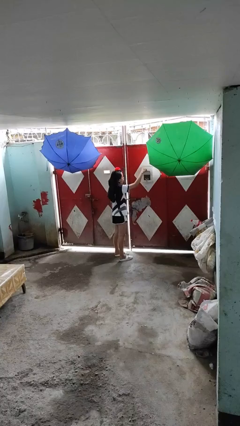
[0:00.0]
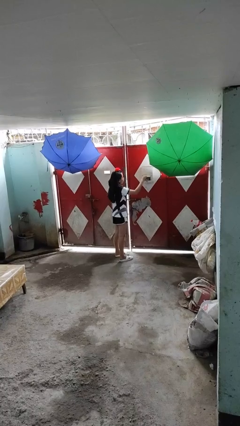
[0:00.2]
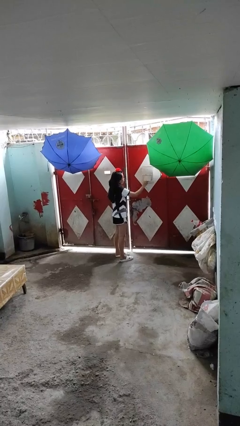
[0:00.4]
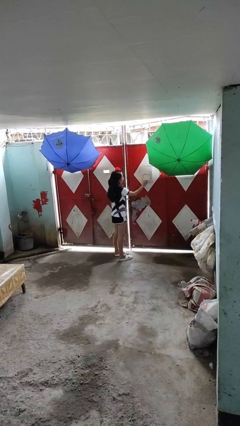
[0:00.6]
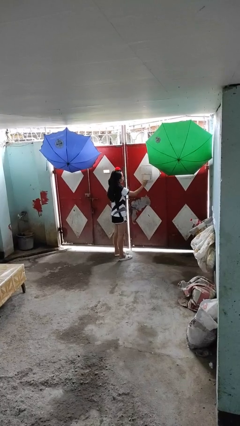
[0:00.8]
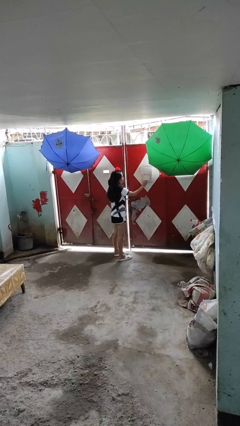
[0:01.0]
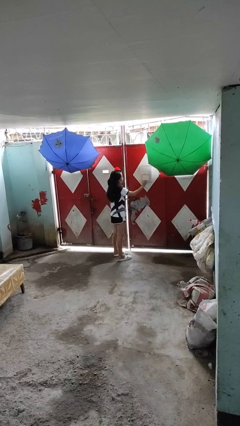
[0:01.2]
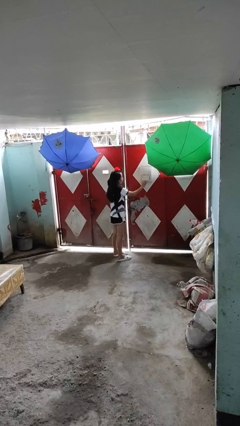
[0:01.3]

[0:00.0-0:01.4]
person closes mailbox

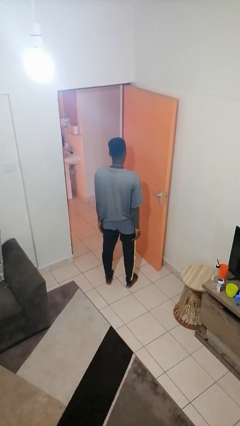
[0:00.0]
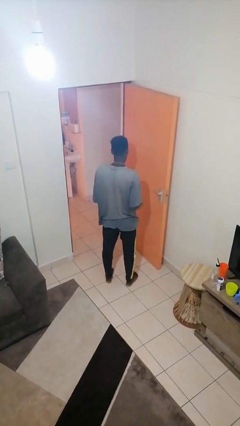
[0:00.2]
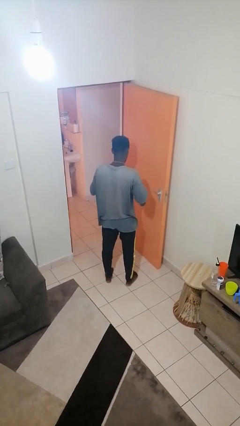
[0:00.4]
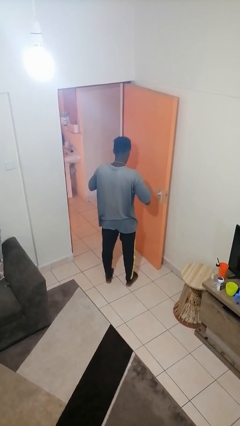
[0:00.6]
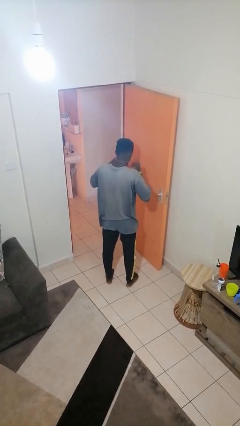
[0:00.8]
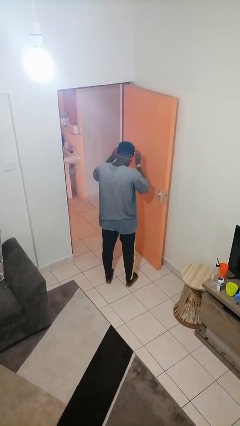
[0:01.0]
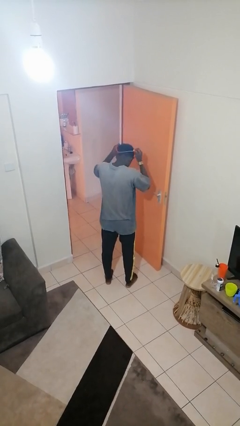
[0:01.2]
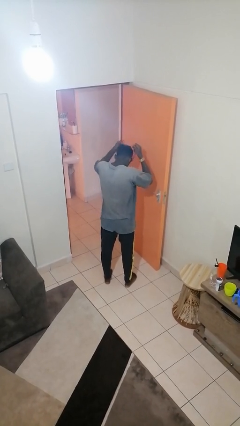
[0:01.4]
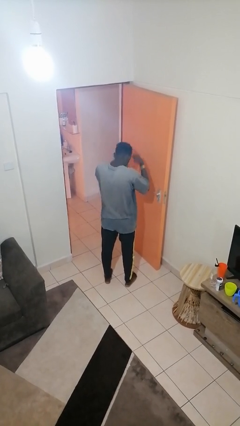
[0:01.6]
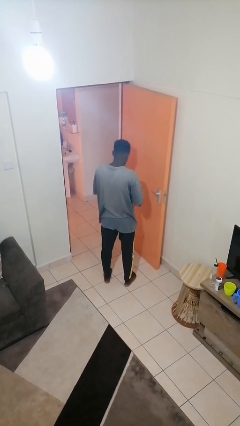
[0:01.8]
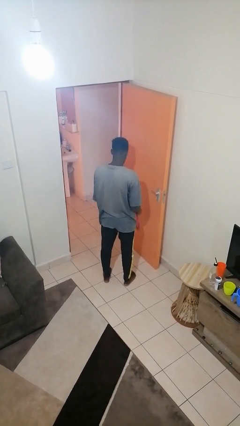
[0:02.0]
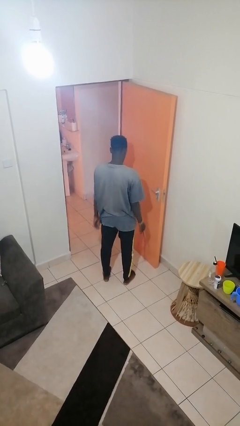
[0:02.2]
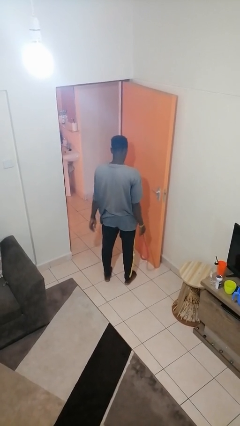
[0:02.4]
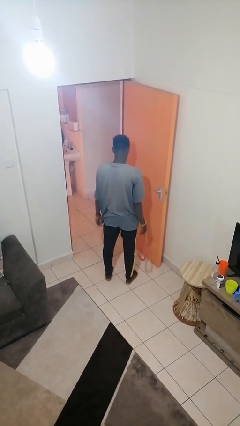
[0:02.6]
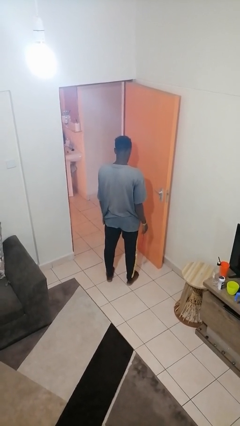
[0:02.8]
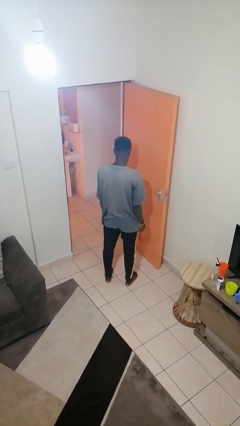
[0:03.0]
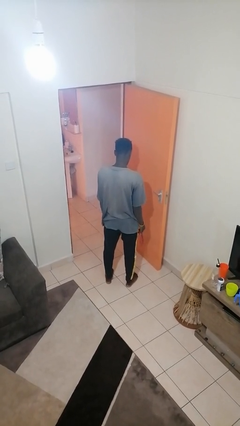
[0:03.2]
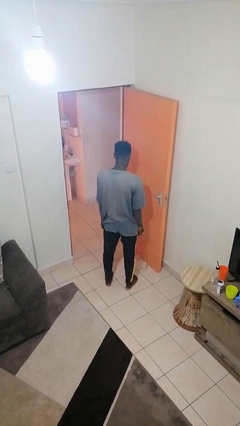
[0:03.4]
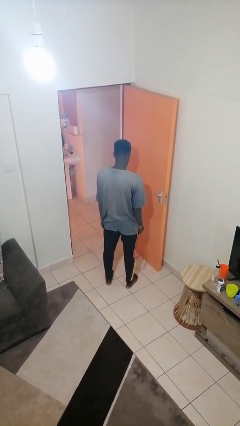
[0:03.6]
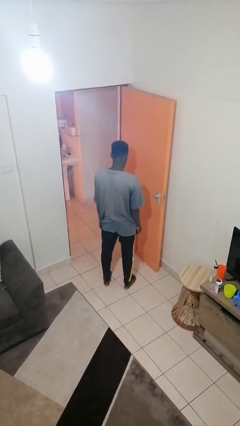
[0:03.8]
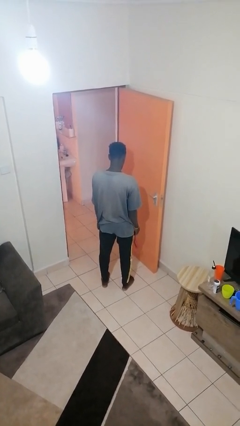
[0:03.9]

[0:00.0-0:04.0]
person takes off necklace

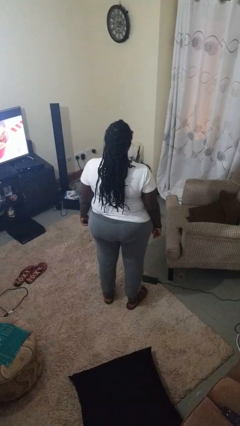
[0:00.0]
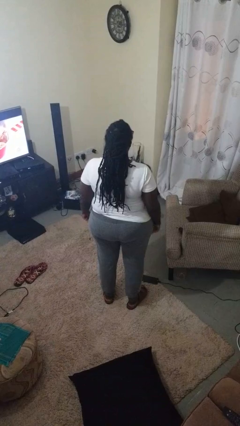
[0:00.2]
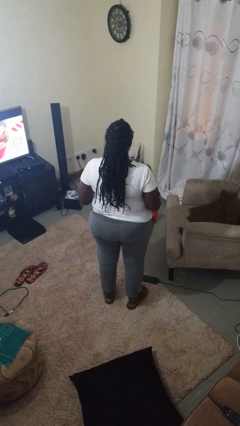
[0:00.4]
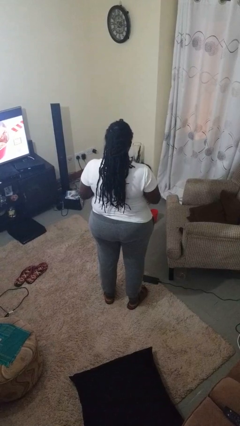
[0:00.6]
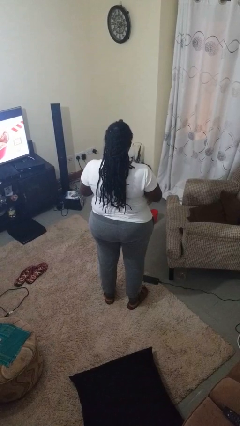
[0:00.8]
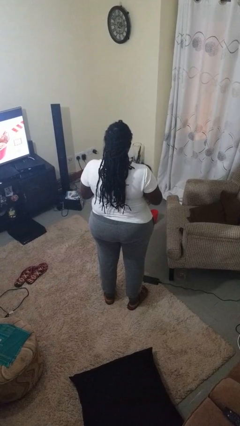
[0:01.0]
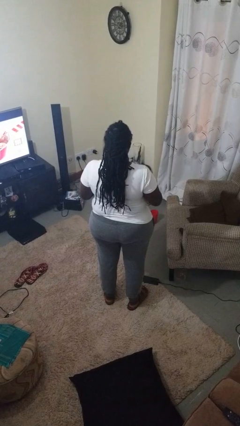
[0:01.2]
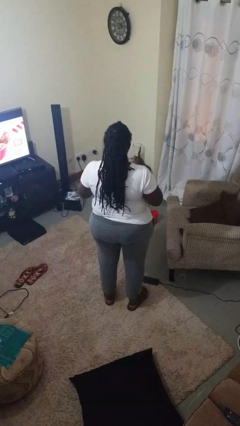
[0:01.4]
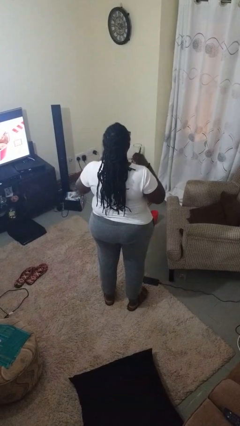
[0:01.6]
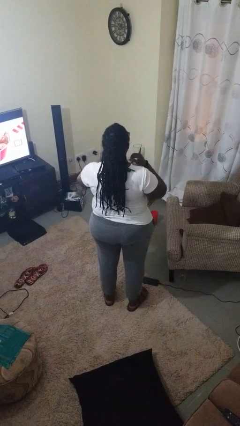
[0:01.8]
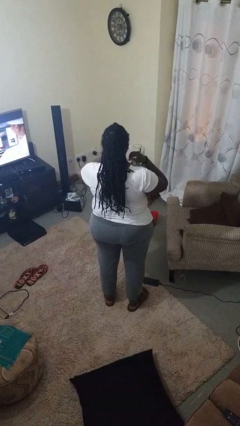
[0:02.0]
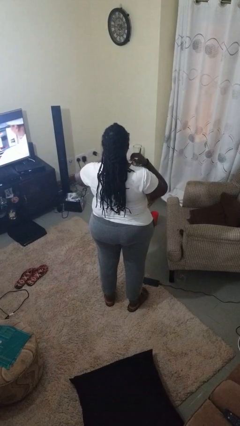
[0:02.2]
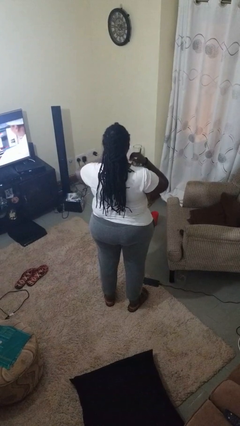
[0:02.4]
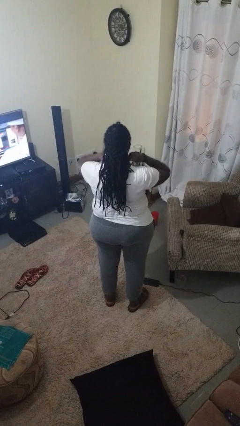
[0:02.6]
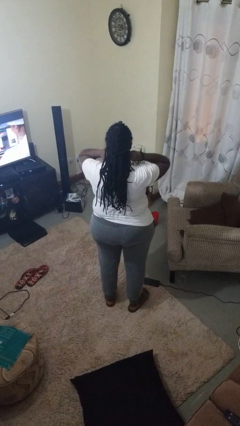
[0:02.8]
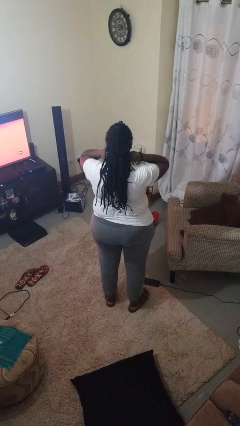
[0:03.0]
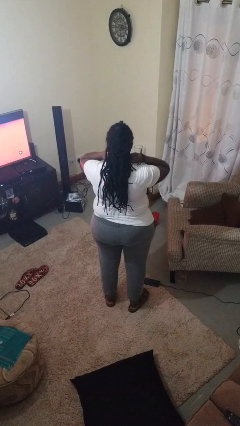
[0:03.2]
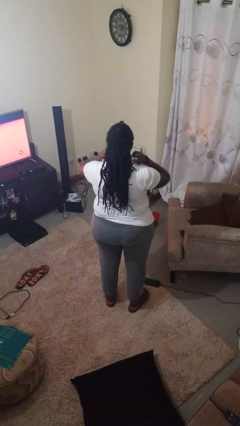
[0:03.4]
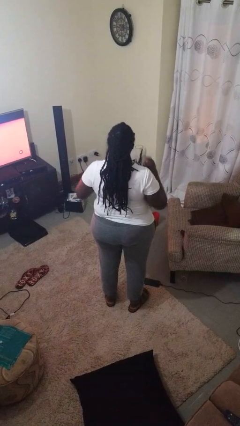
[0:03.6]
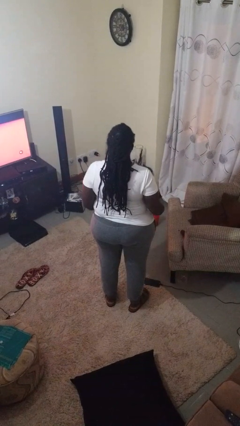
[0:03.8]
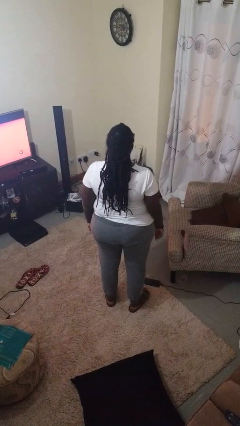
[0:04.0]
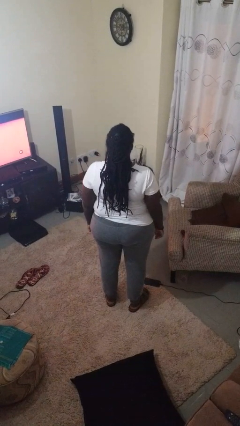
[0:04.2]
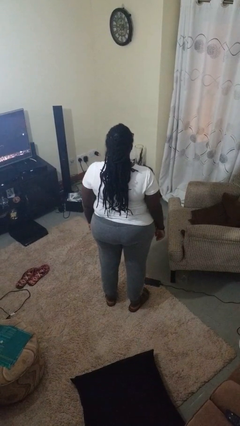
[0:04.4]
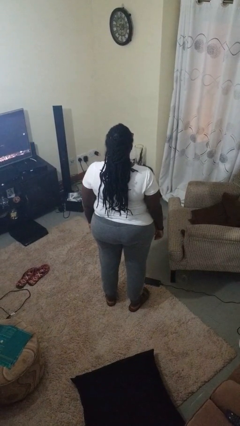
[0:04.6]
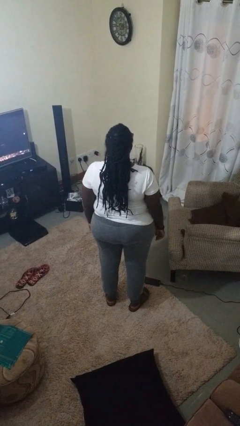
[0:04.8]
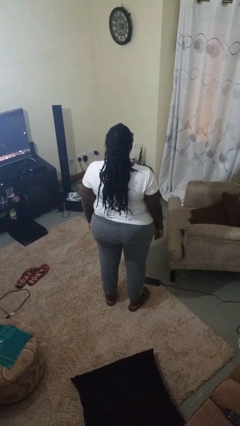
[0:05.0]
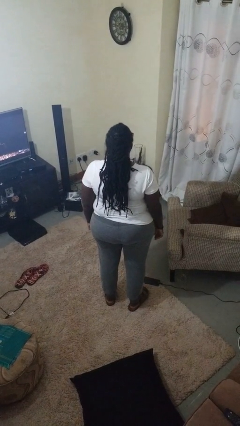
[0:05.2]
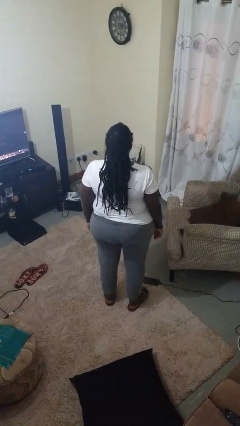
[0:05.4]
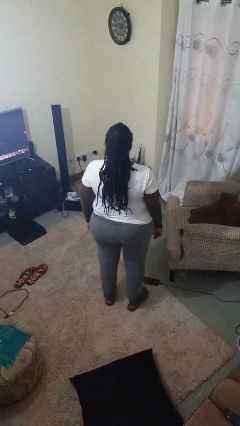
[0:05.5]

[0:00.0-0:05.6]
person puts on necklace

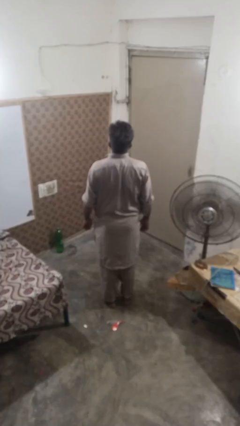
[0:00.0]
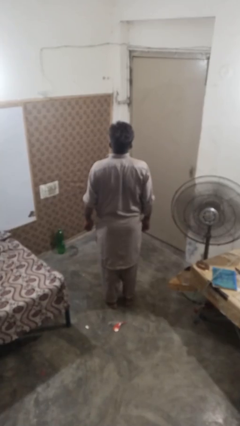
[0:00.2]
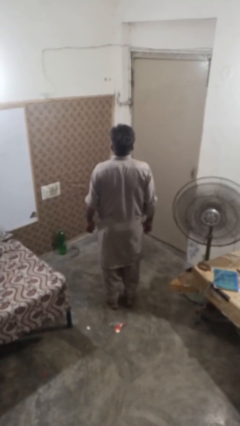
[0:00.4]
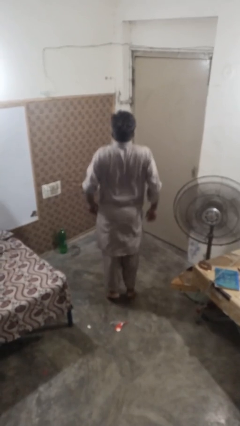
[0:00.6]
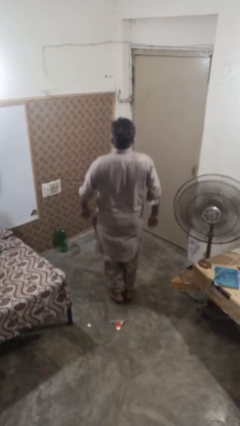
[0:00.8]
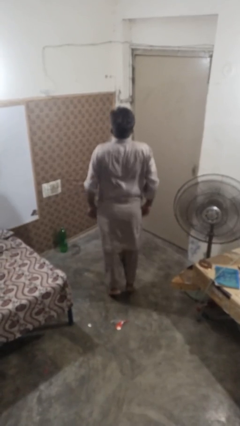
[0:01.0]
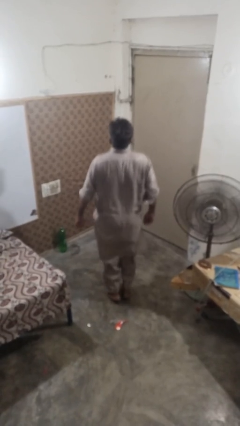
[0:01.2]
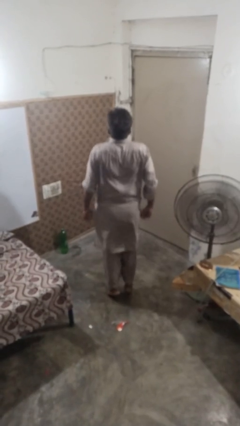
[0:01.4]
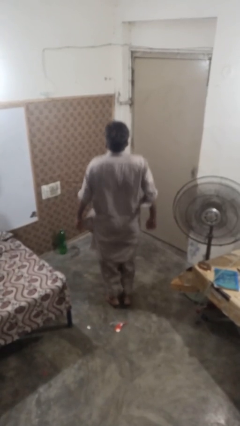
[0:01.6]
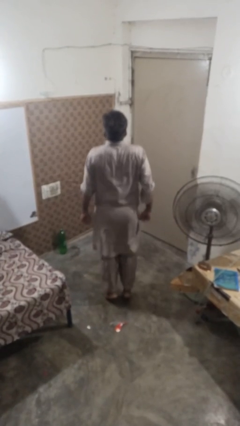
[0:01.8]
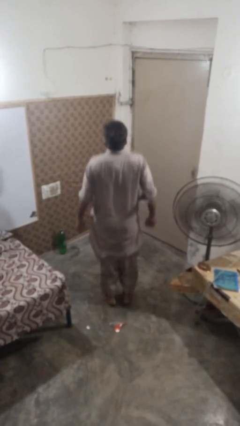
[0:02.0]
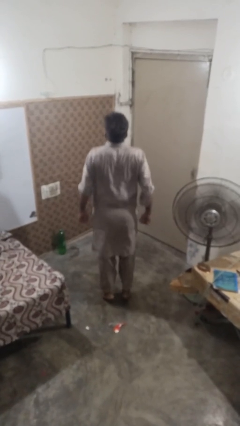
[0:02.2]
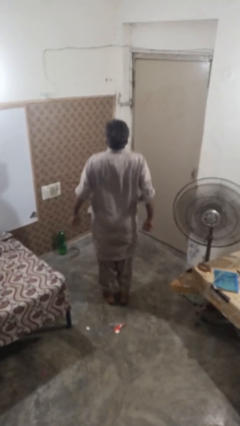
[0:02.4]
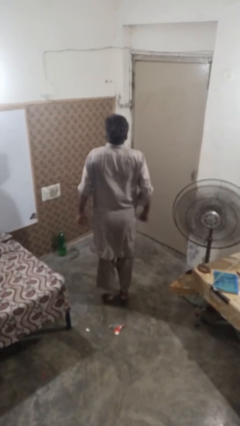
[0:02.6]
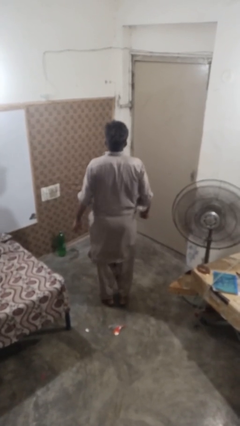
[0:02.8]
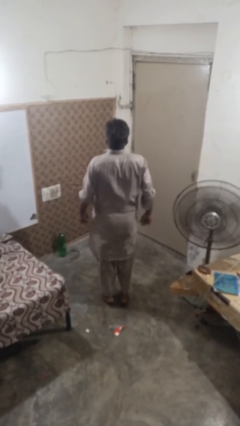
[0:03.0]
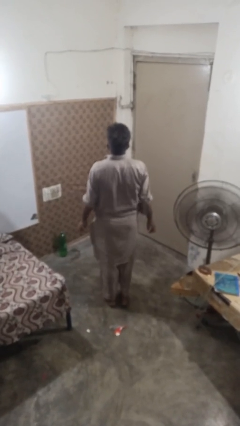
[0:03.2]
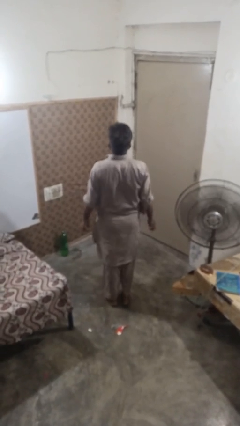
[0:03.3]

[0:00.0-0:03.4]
person jumps

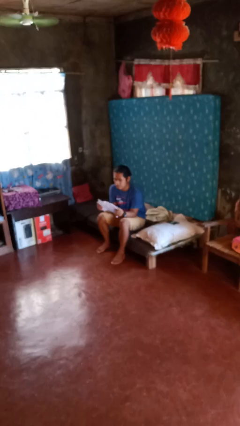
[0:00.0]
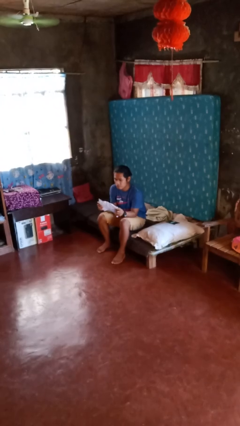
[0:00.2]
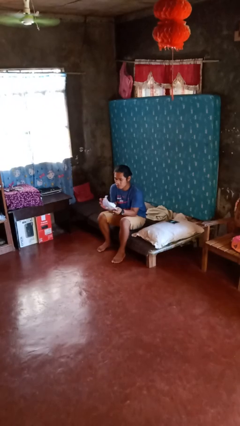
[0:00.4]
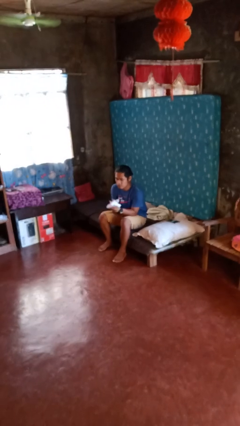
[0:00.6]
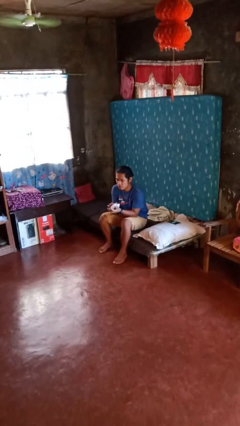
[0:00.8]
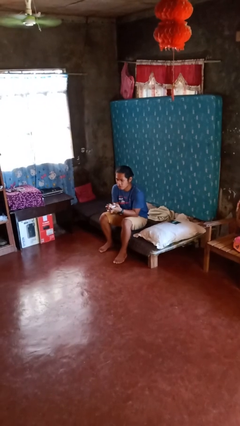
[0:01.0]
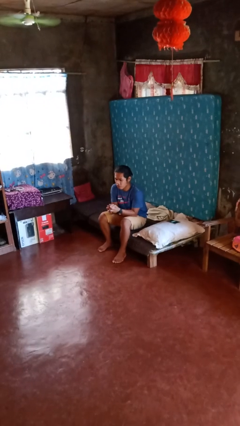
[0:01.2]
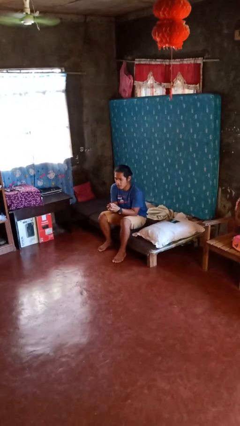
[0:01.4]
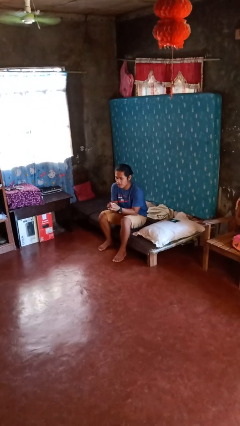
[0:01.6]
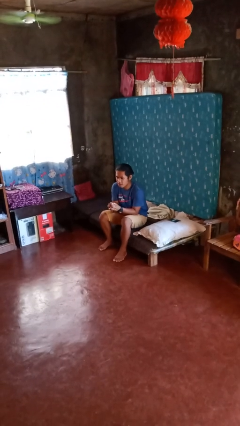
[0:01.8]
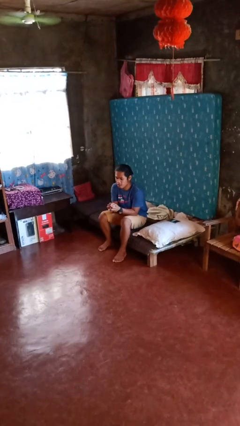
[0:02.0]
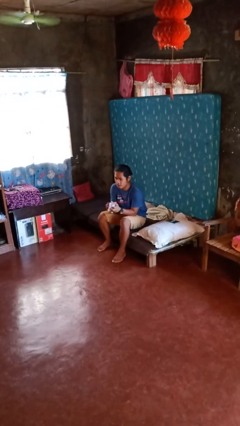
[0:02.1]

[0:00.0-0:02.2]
person crumples paper

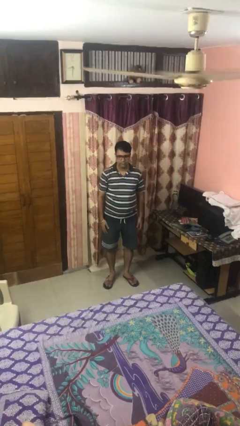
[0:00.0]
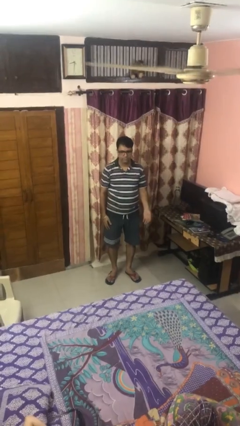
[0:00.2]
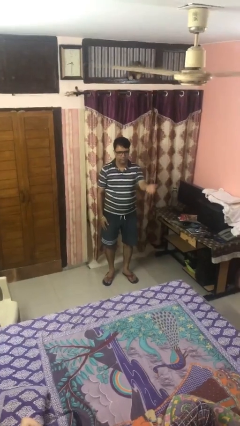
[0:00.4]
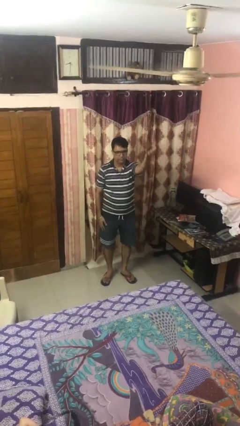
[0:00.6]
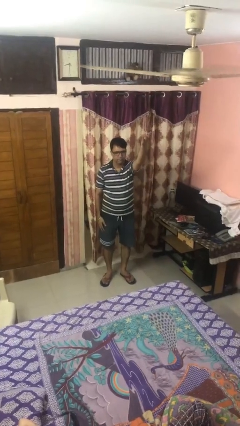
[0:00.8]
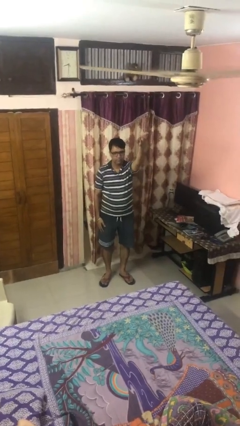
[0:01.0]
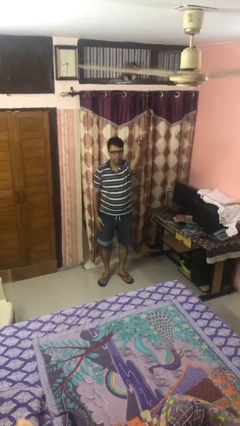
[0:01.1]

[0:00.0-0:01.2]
person gestures swipe up
